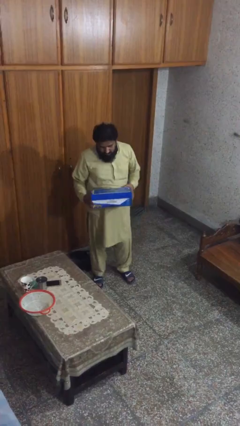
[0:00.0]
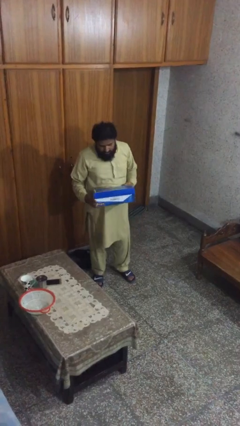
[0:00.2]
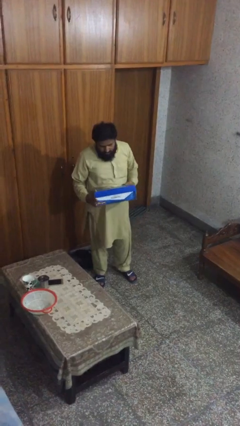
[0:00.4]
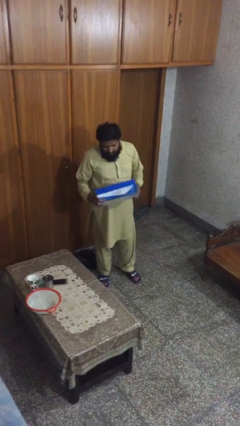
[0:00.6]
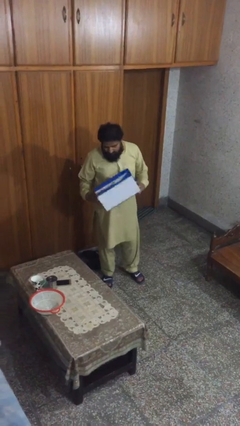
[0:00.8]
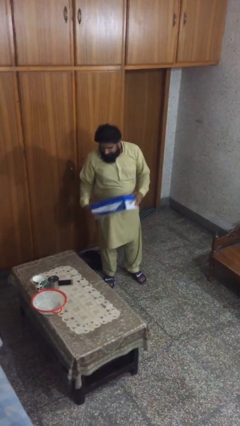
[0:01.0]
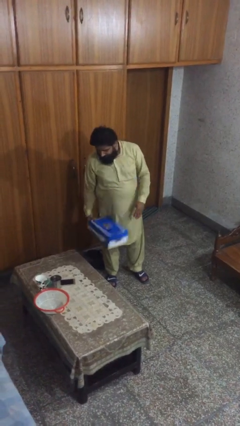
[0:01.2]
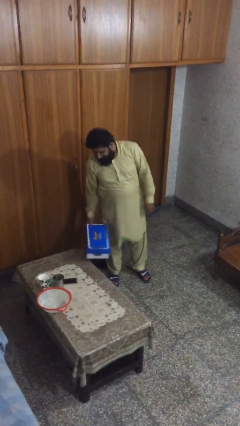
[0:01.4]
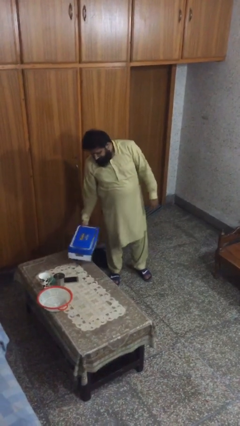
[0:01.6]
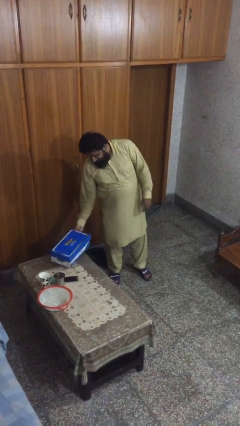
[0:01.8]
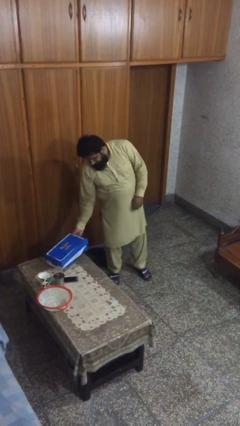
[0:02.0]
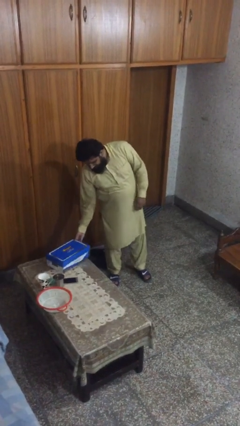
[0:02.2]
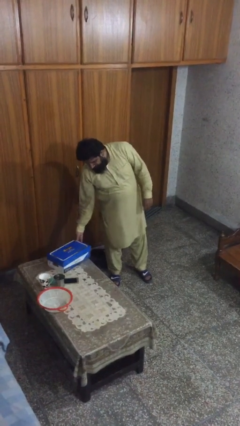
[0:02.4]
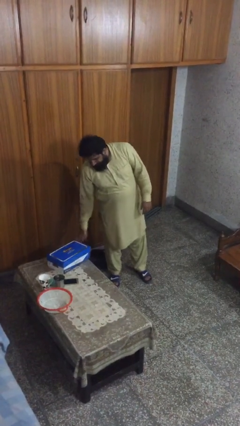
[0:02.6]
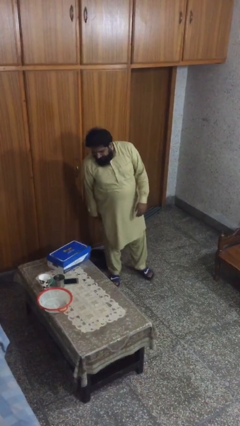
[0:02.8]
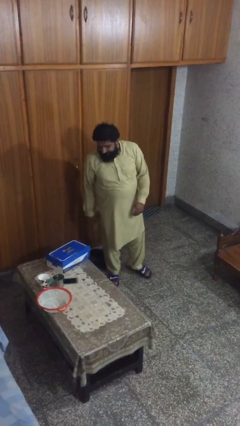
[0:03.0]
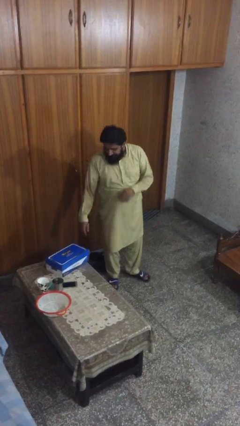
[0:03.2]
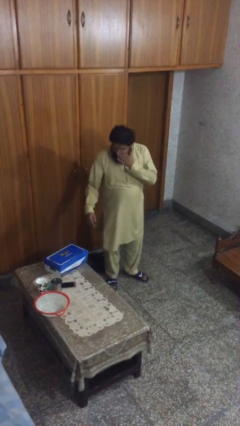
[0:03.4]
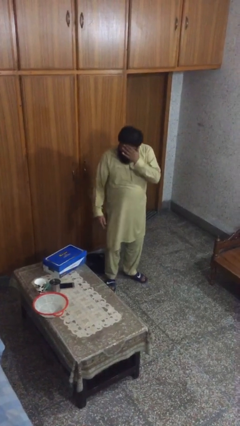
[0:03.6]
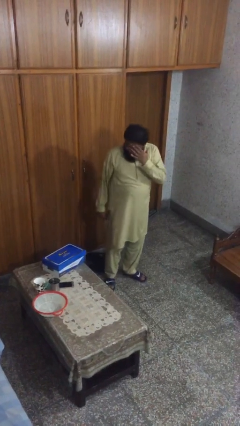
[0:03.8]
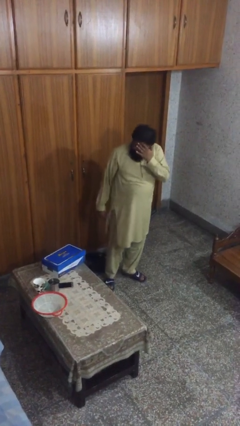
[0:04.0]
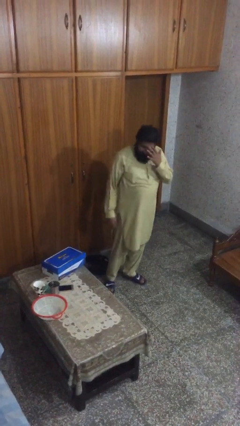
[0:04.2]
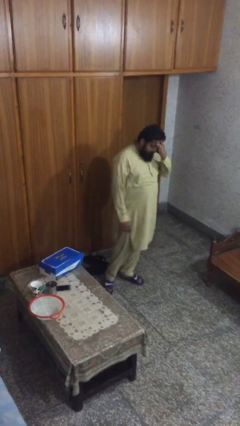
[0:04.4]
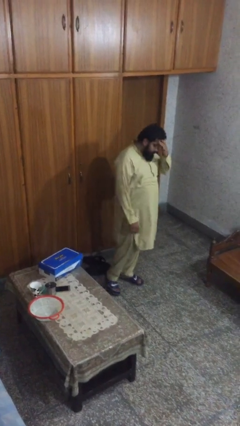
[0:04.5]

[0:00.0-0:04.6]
person puts down object on table

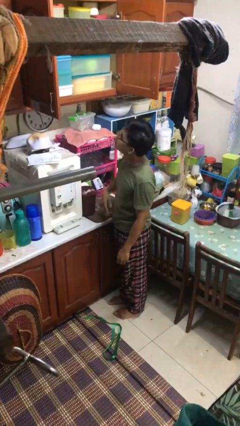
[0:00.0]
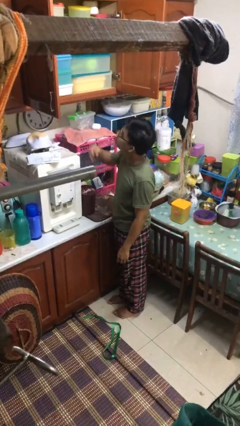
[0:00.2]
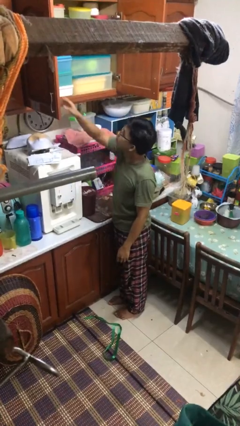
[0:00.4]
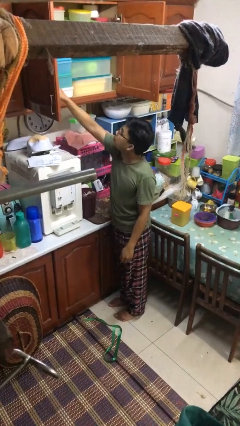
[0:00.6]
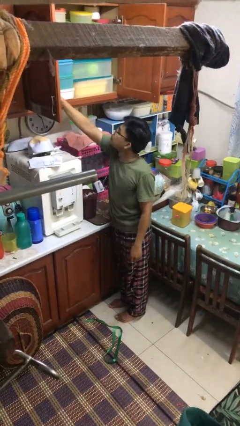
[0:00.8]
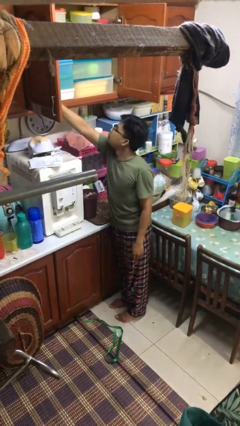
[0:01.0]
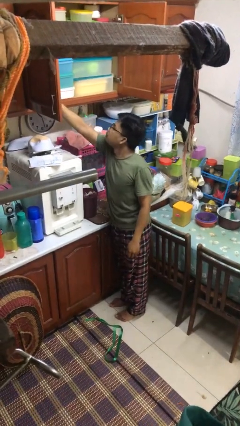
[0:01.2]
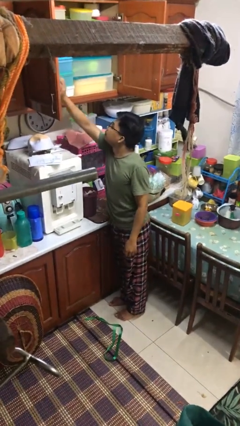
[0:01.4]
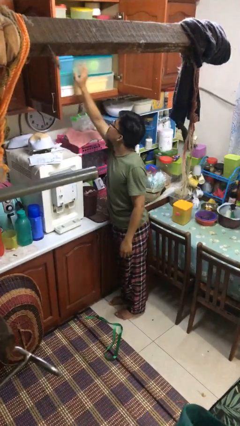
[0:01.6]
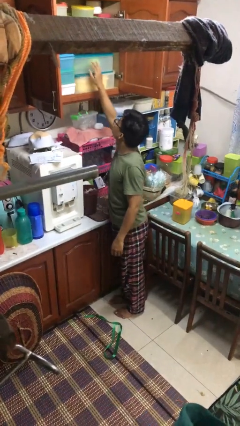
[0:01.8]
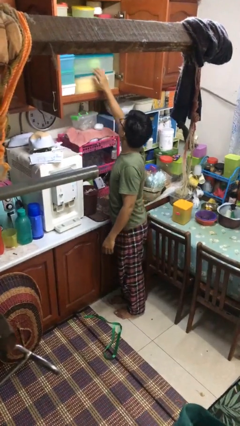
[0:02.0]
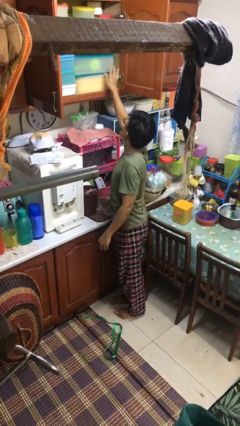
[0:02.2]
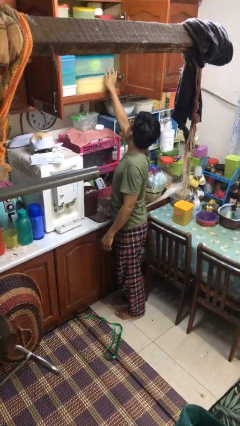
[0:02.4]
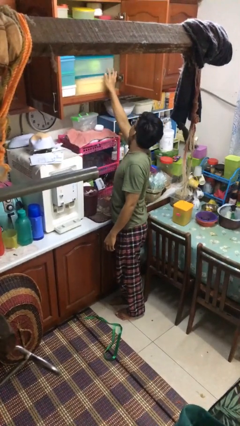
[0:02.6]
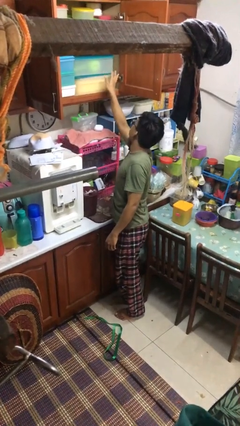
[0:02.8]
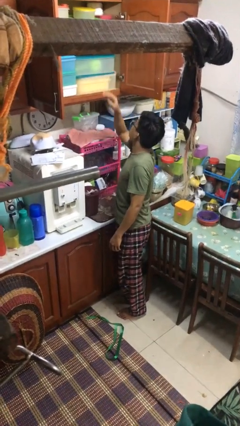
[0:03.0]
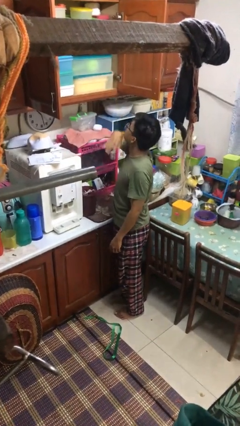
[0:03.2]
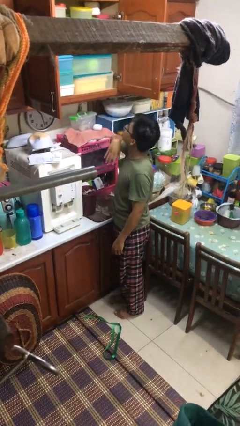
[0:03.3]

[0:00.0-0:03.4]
person searches in kitchen drawer

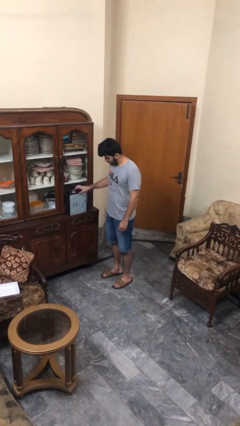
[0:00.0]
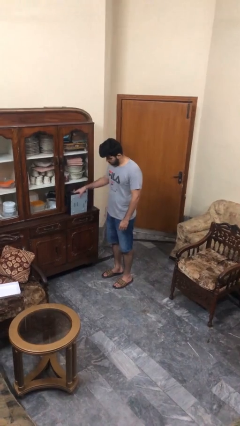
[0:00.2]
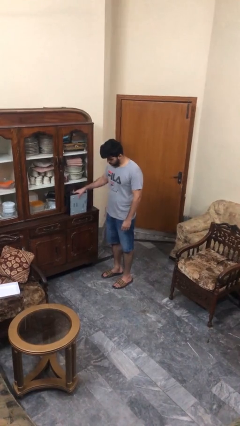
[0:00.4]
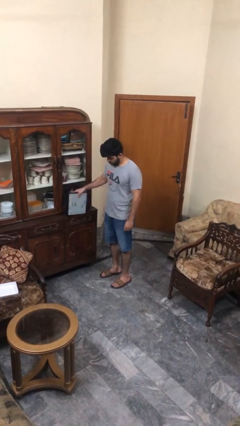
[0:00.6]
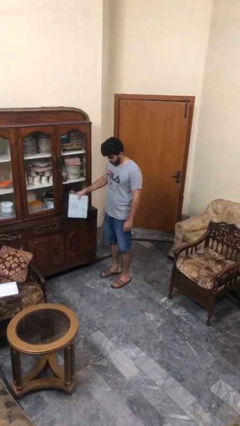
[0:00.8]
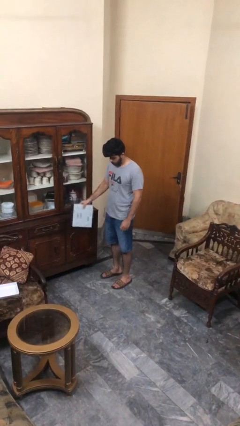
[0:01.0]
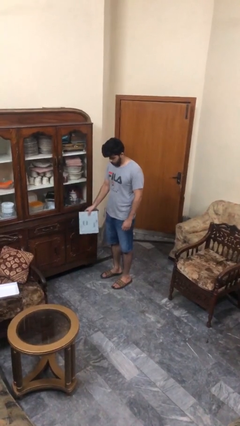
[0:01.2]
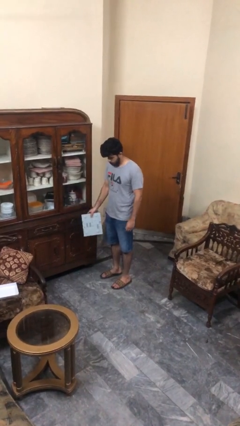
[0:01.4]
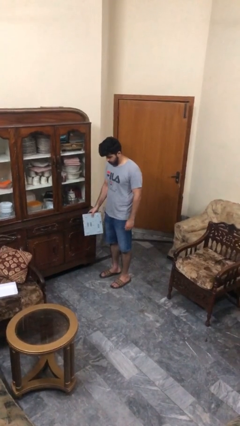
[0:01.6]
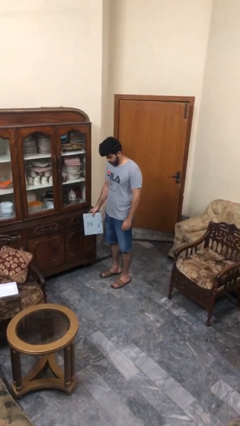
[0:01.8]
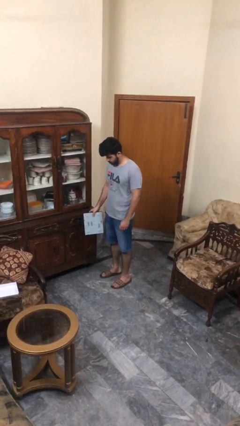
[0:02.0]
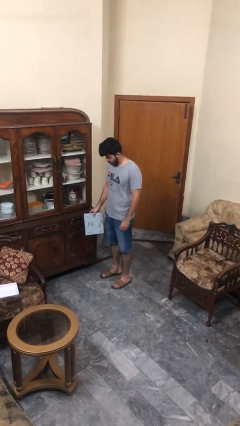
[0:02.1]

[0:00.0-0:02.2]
person picks up object from countertop

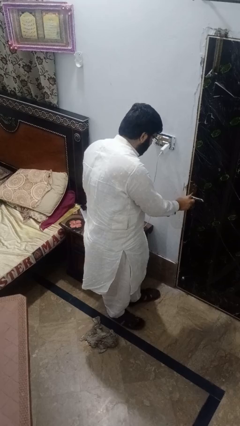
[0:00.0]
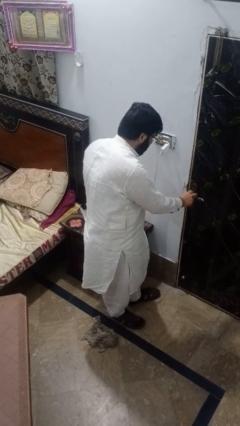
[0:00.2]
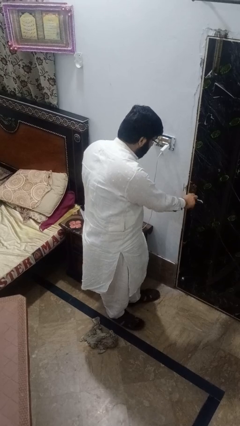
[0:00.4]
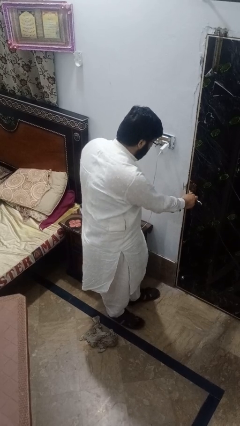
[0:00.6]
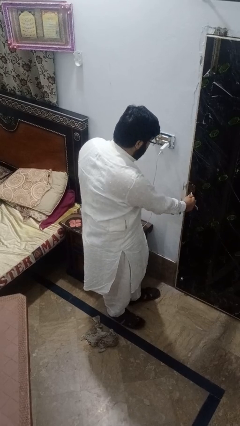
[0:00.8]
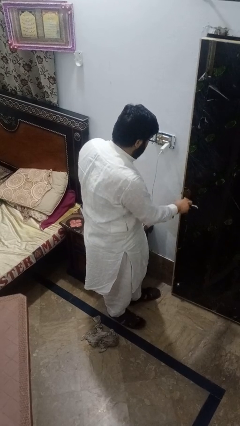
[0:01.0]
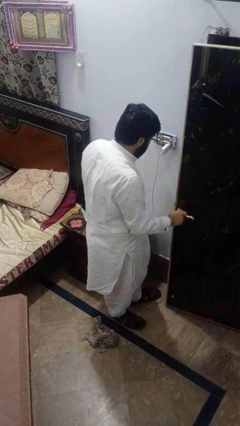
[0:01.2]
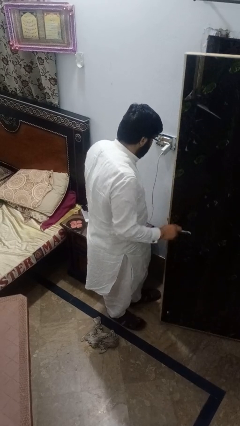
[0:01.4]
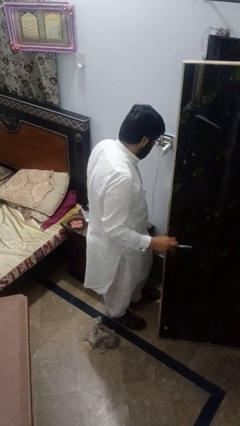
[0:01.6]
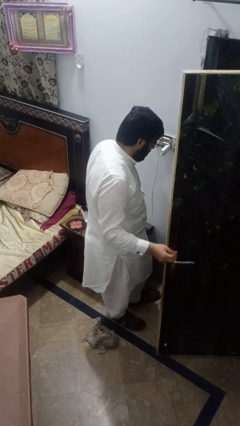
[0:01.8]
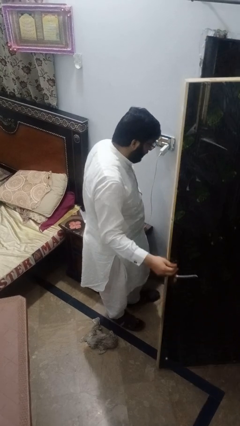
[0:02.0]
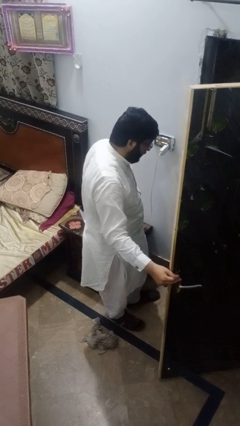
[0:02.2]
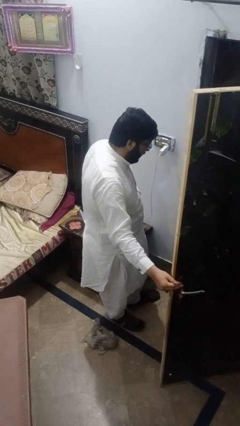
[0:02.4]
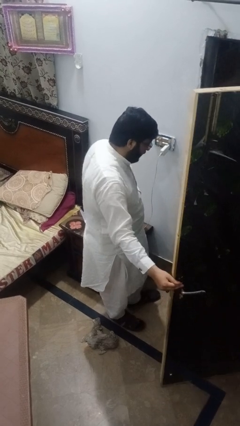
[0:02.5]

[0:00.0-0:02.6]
person opens facility door

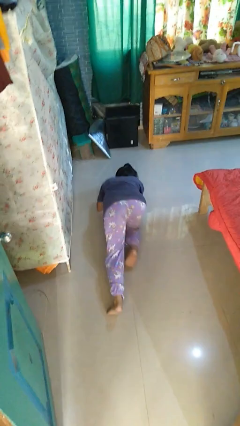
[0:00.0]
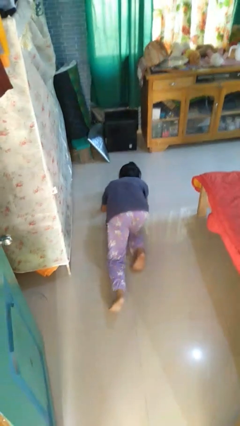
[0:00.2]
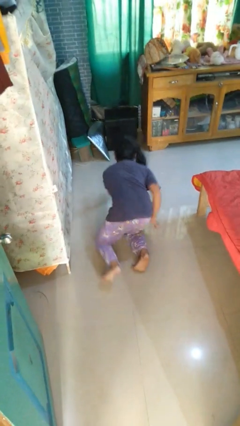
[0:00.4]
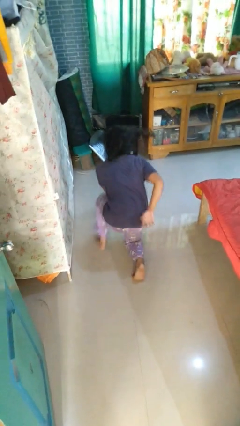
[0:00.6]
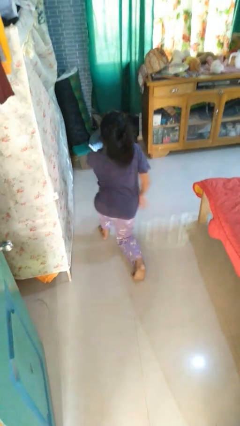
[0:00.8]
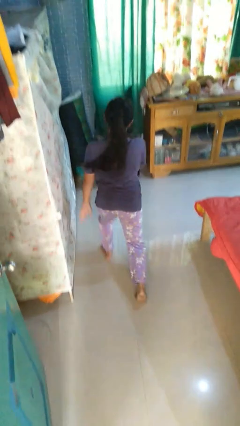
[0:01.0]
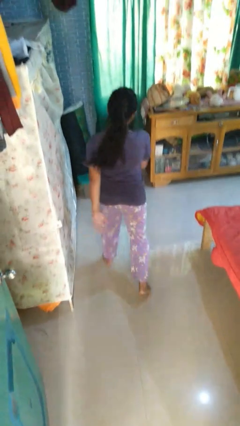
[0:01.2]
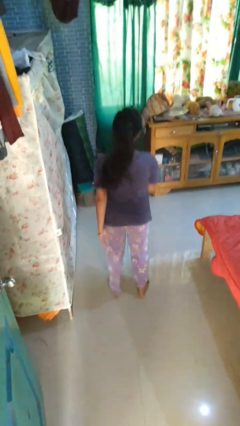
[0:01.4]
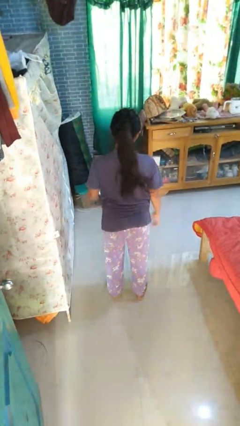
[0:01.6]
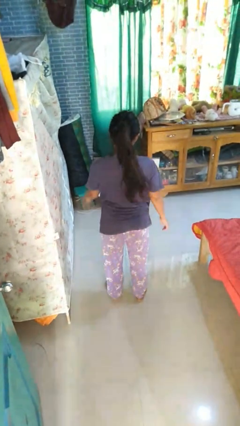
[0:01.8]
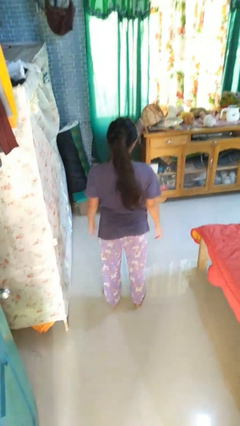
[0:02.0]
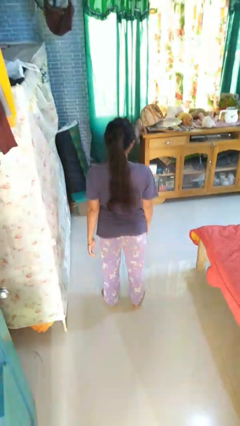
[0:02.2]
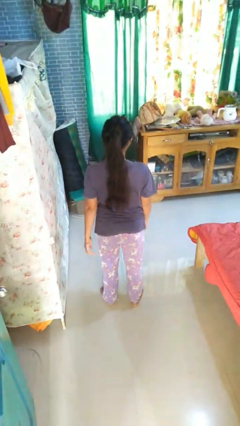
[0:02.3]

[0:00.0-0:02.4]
person stands up from floor

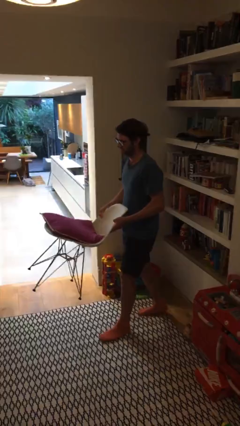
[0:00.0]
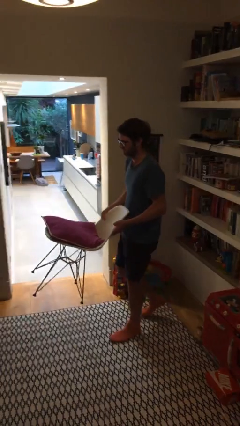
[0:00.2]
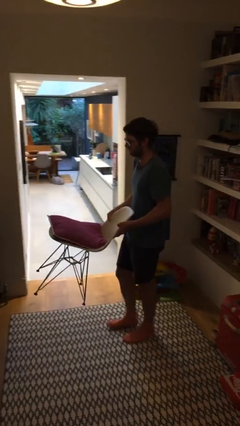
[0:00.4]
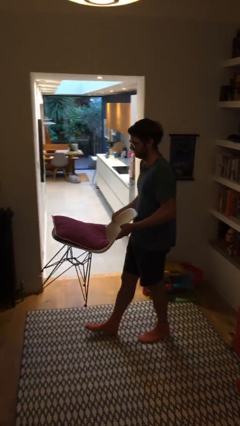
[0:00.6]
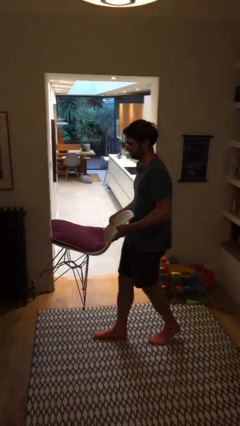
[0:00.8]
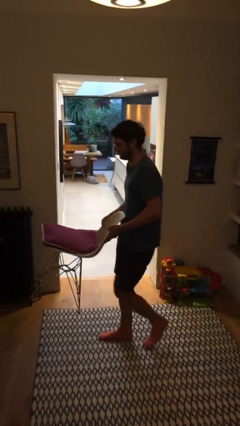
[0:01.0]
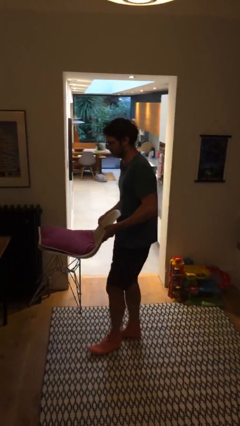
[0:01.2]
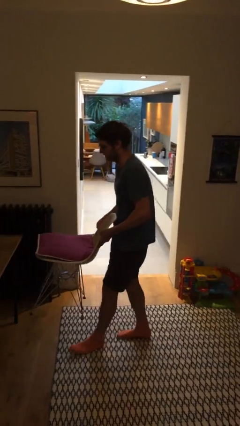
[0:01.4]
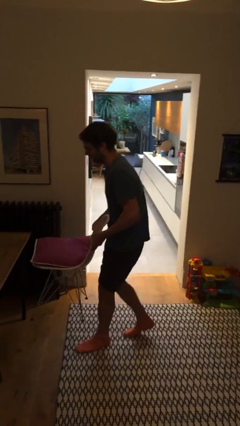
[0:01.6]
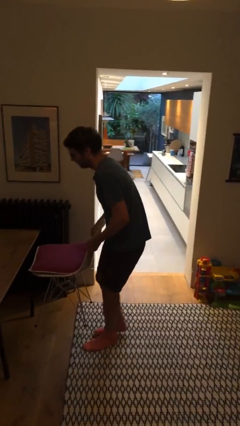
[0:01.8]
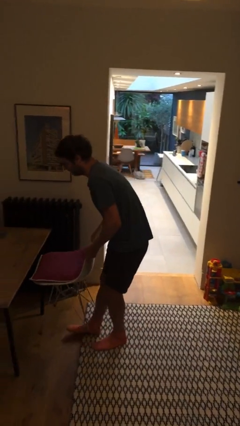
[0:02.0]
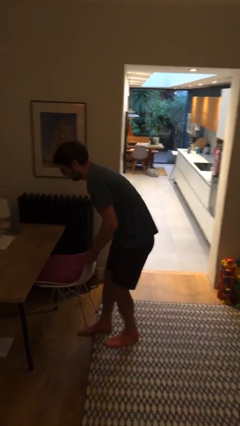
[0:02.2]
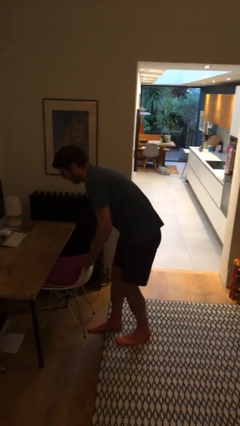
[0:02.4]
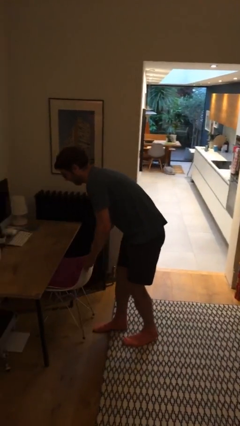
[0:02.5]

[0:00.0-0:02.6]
person carries heavy object
